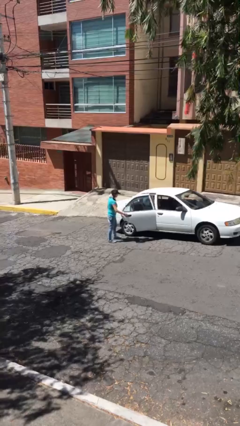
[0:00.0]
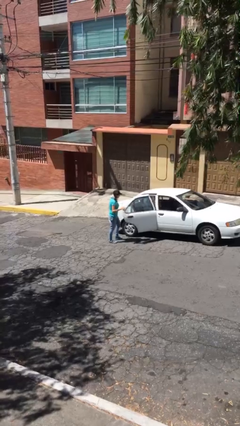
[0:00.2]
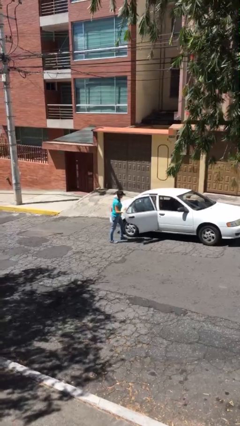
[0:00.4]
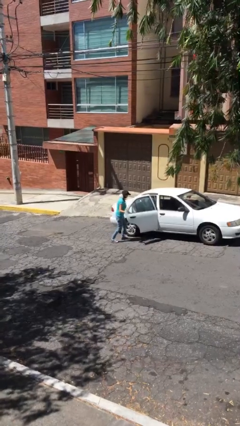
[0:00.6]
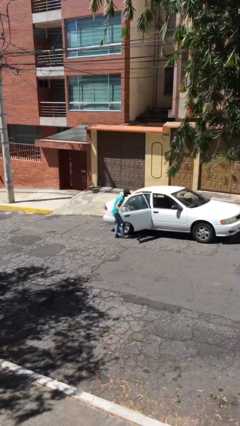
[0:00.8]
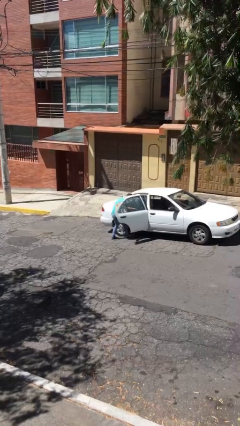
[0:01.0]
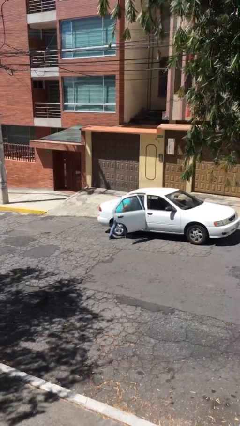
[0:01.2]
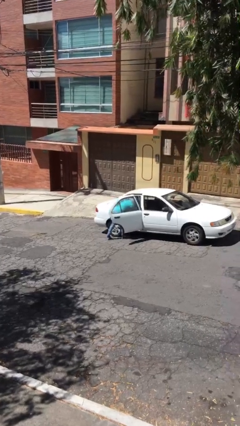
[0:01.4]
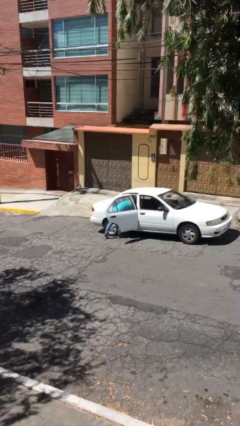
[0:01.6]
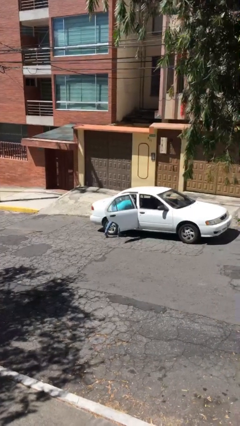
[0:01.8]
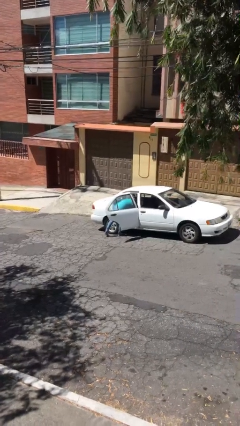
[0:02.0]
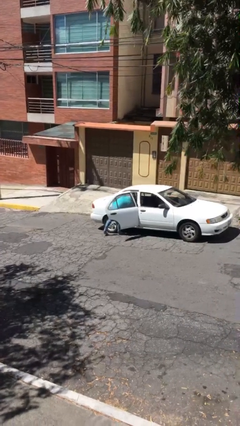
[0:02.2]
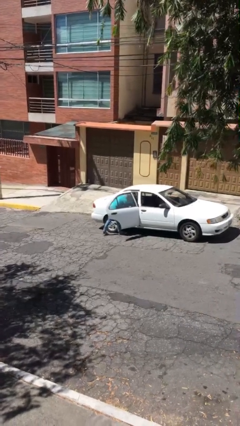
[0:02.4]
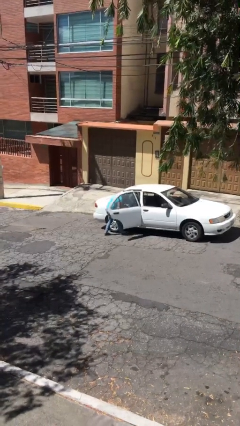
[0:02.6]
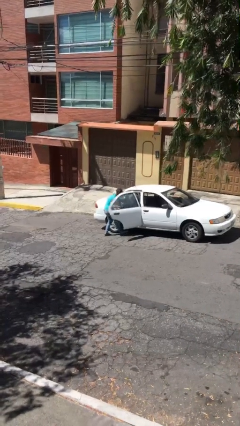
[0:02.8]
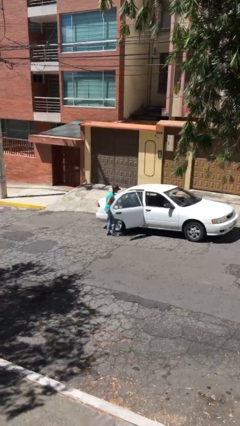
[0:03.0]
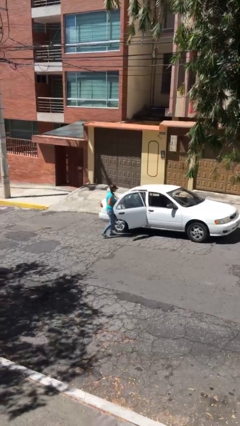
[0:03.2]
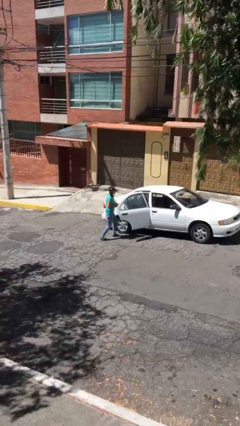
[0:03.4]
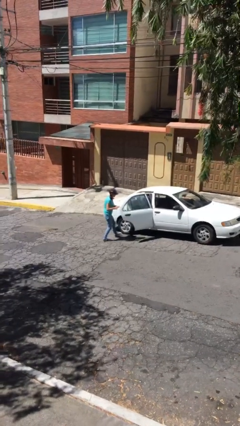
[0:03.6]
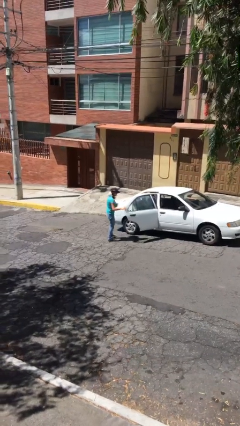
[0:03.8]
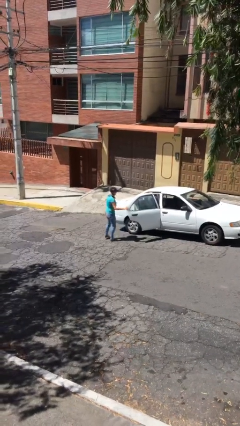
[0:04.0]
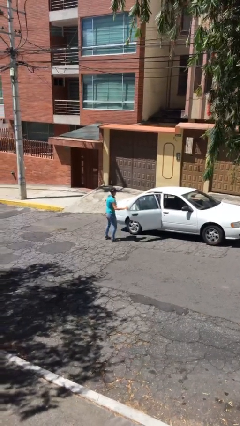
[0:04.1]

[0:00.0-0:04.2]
person unloads car

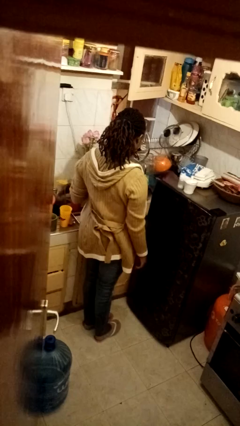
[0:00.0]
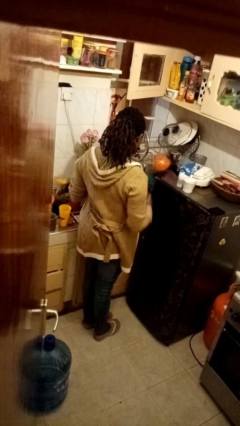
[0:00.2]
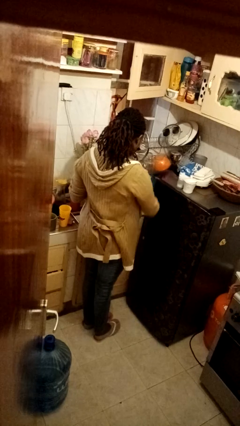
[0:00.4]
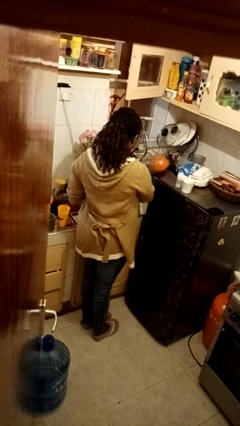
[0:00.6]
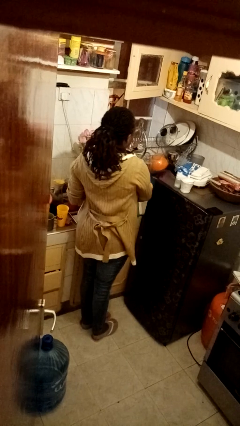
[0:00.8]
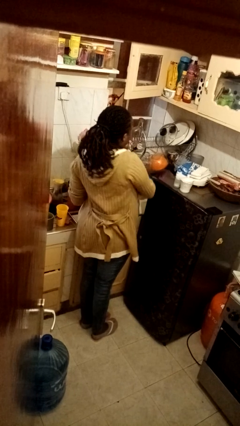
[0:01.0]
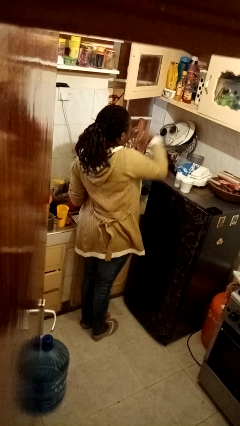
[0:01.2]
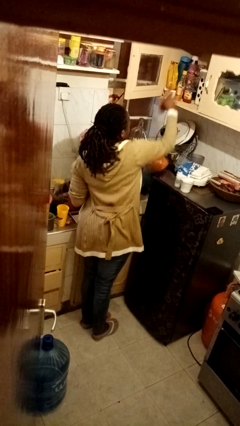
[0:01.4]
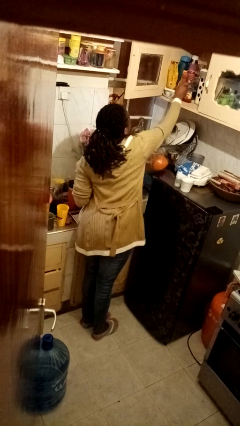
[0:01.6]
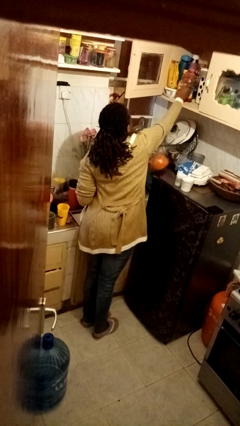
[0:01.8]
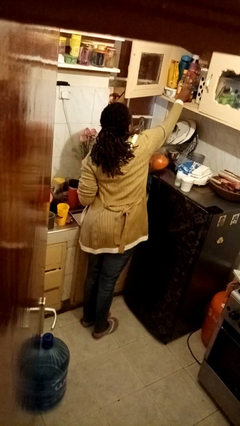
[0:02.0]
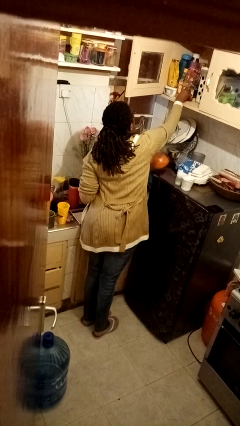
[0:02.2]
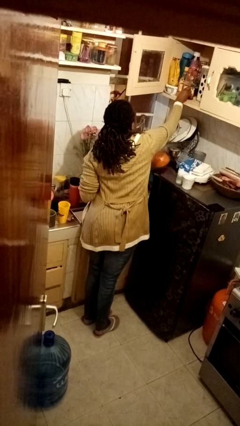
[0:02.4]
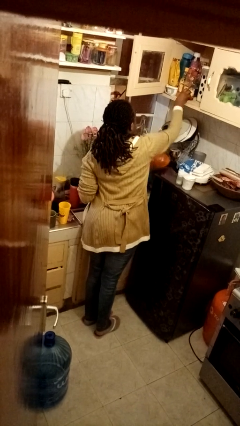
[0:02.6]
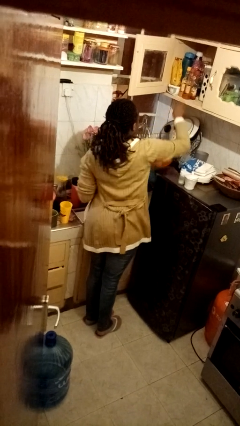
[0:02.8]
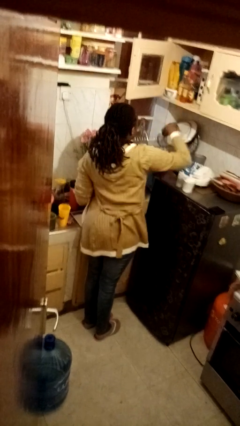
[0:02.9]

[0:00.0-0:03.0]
person loads groceries into cabinet

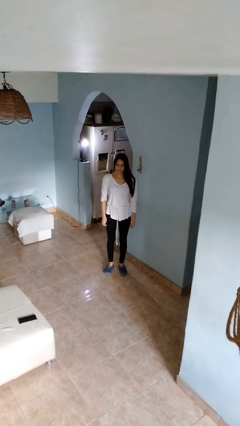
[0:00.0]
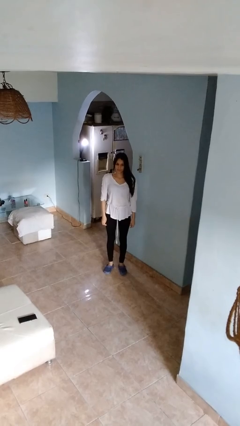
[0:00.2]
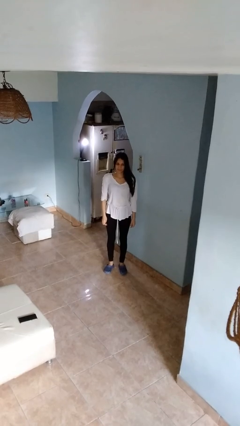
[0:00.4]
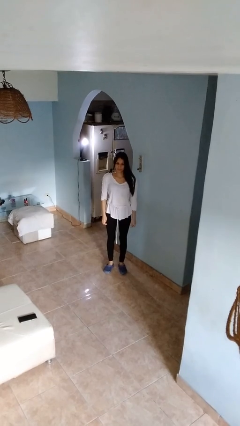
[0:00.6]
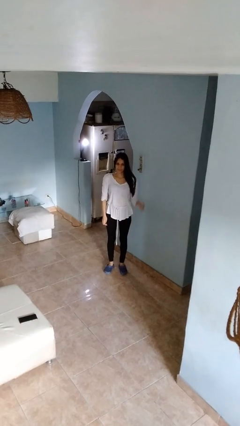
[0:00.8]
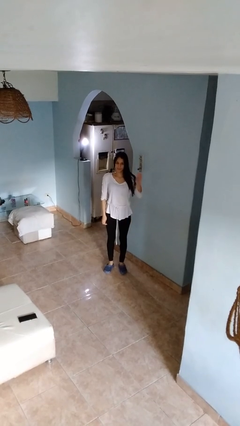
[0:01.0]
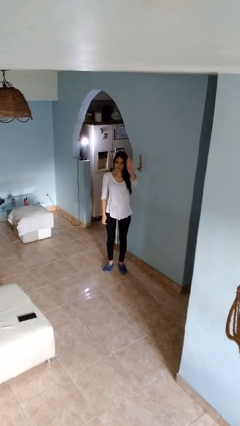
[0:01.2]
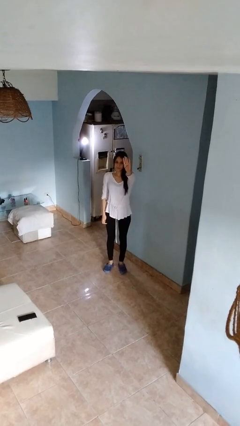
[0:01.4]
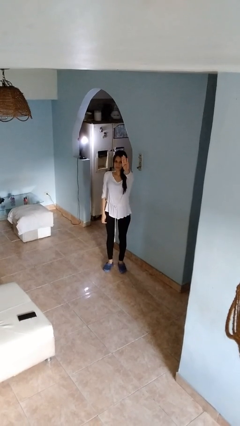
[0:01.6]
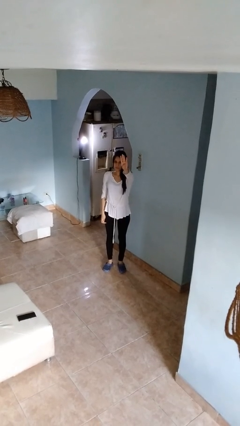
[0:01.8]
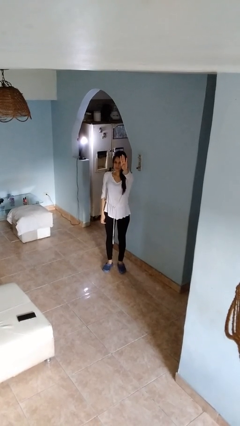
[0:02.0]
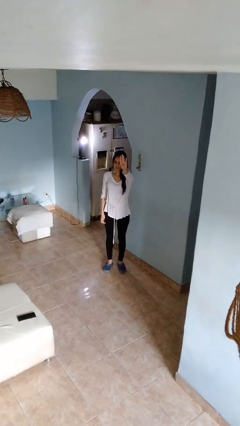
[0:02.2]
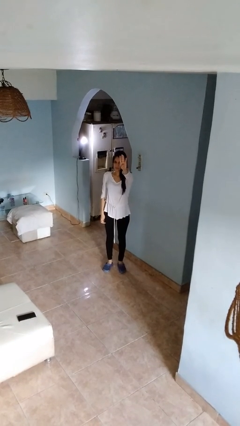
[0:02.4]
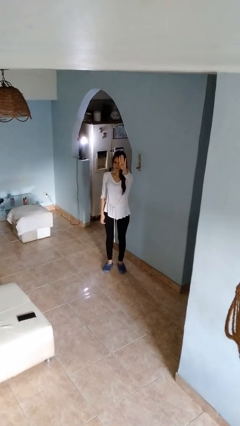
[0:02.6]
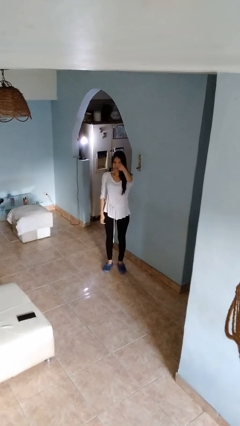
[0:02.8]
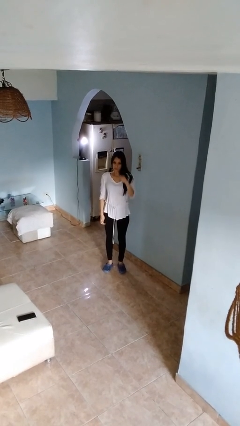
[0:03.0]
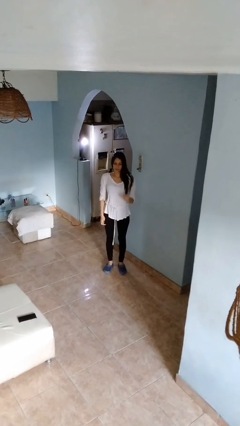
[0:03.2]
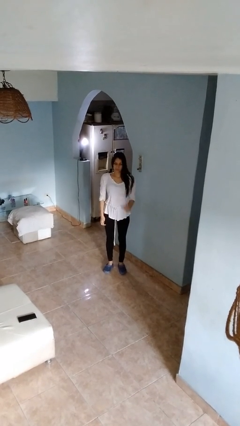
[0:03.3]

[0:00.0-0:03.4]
person gestures number four

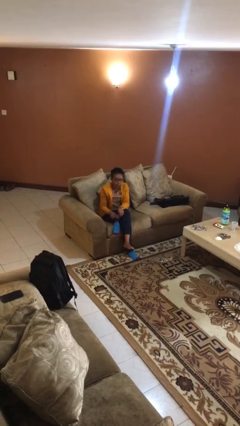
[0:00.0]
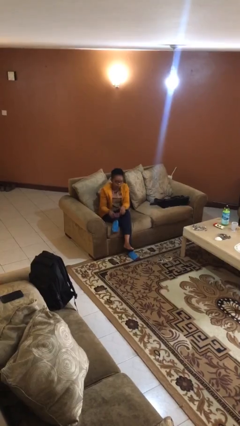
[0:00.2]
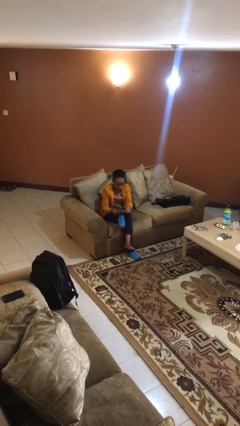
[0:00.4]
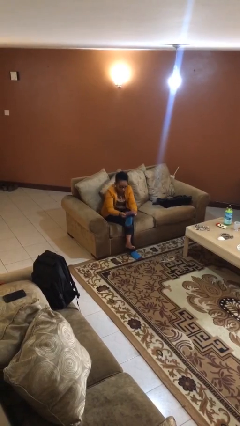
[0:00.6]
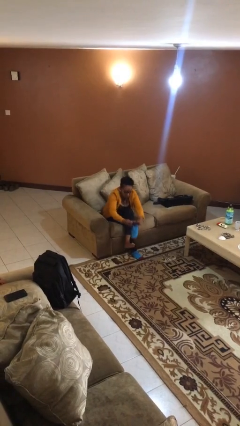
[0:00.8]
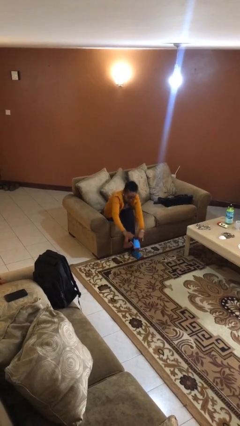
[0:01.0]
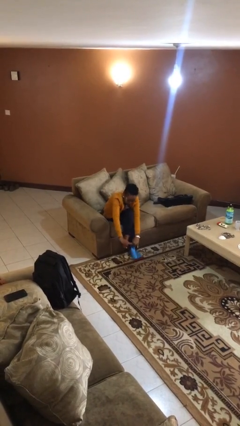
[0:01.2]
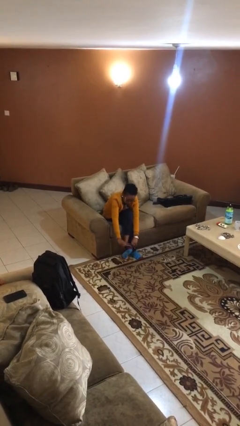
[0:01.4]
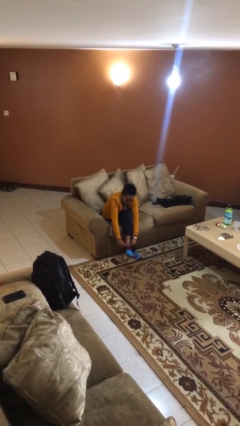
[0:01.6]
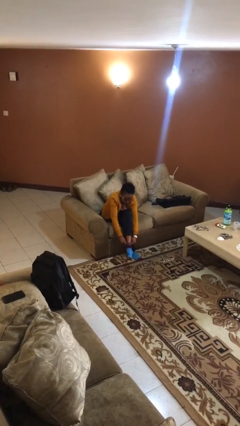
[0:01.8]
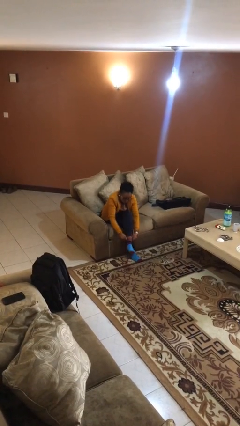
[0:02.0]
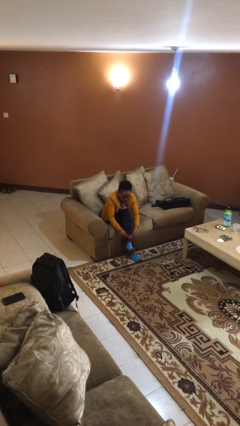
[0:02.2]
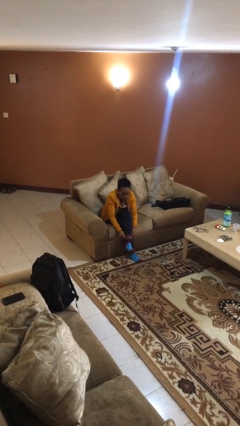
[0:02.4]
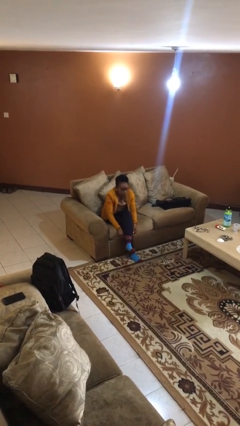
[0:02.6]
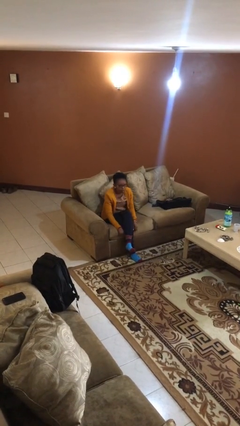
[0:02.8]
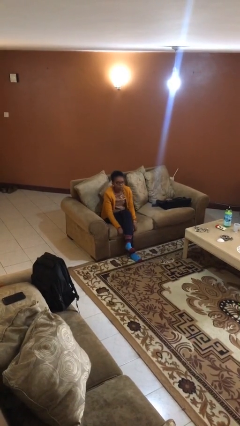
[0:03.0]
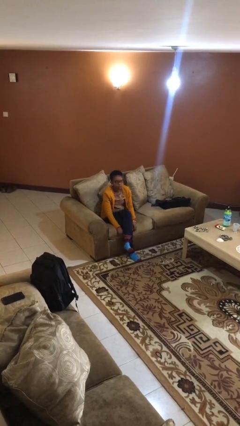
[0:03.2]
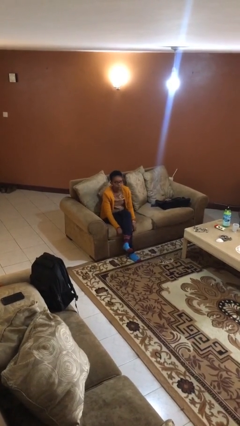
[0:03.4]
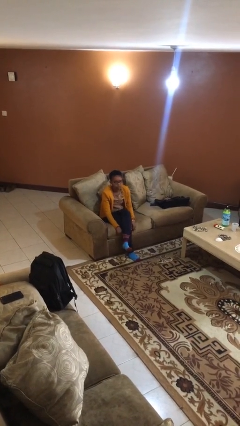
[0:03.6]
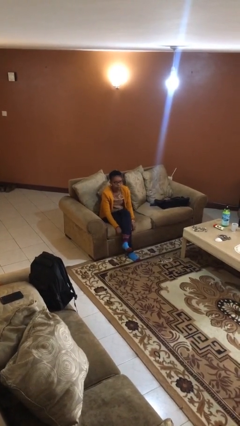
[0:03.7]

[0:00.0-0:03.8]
person puts on socks

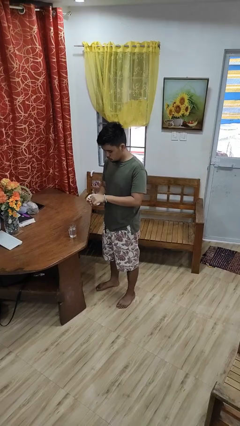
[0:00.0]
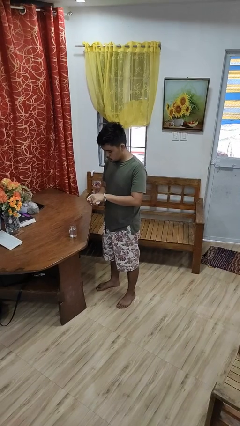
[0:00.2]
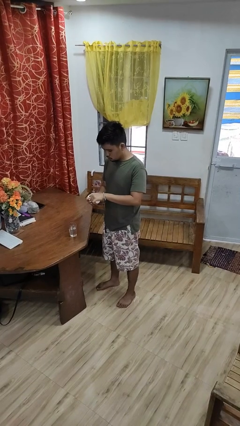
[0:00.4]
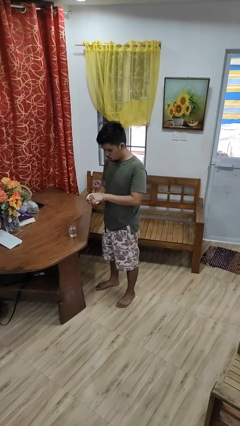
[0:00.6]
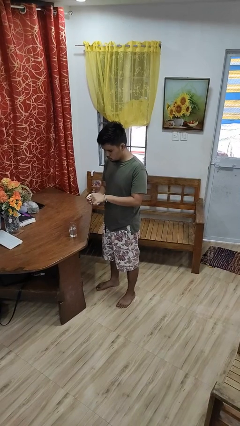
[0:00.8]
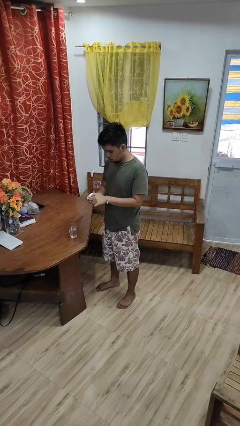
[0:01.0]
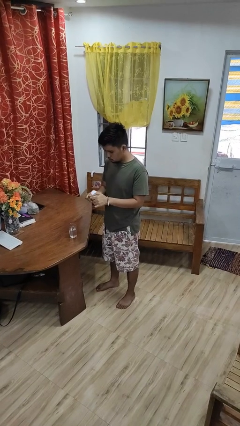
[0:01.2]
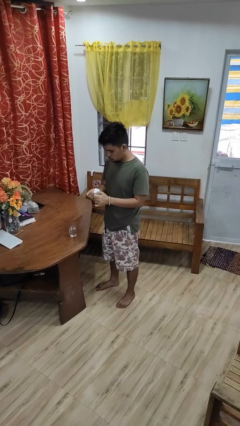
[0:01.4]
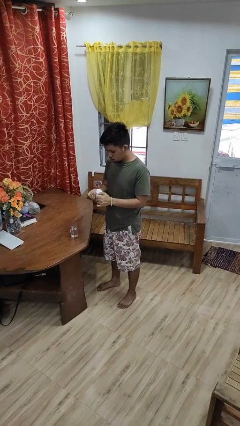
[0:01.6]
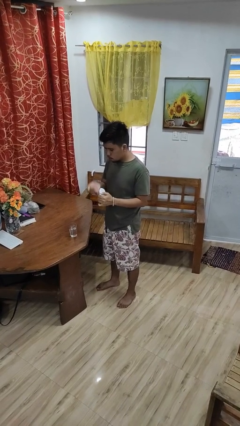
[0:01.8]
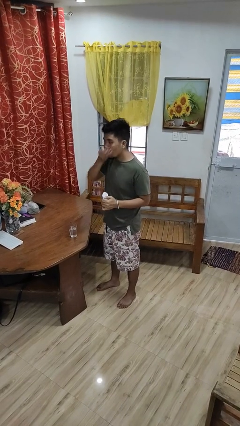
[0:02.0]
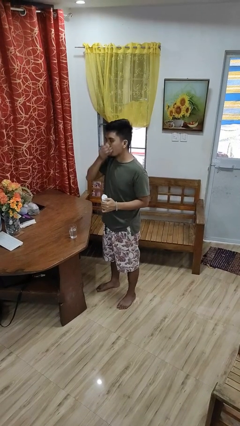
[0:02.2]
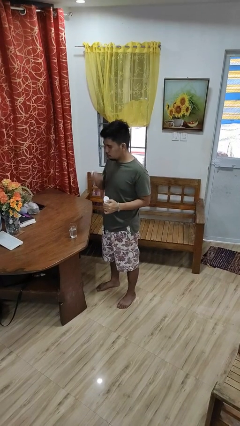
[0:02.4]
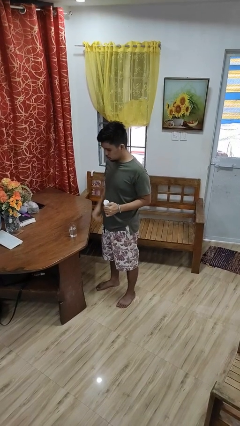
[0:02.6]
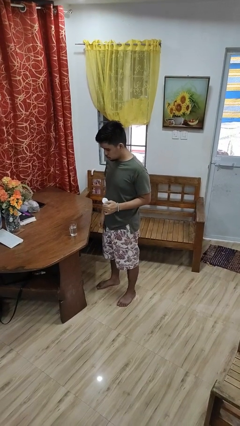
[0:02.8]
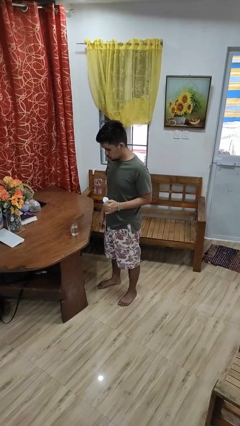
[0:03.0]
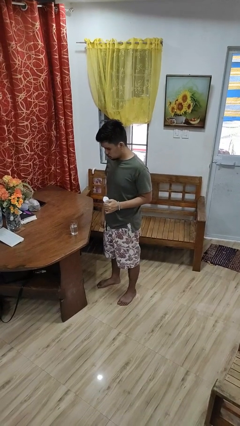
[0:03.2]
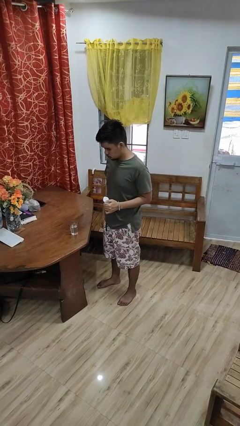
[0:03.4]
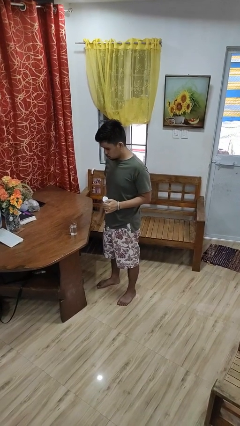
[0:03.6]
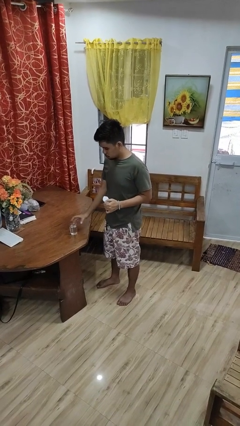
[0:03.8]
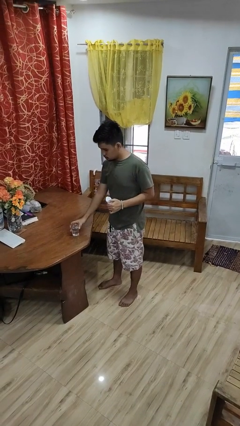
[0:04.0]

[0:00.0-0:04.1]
person takes medicine pills
